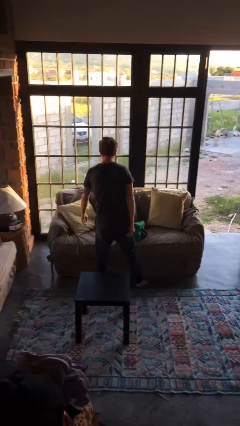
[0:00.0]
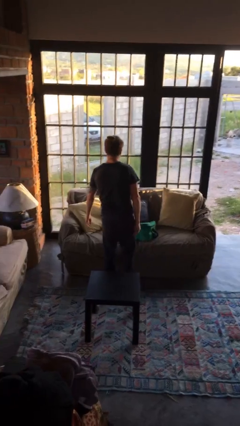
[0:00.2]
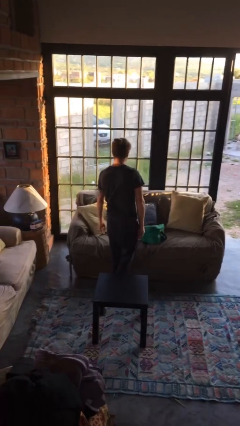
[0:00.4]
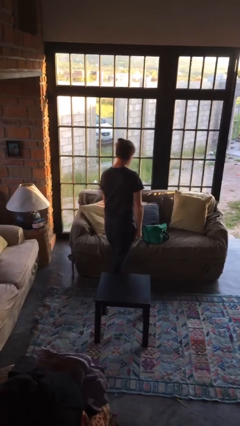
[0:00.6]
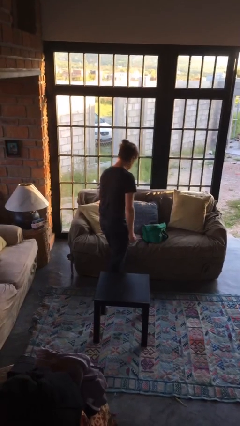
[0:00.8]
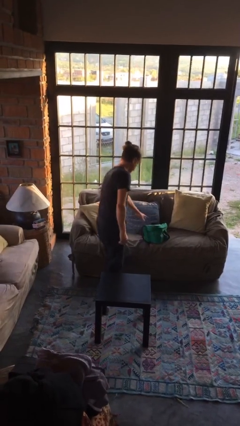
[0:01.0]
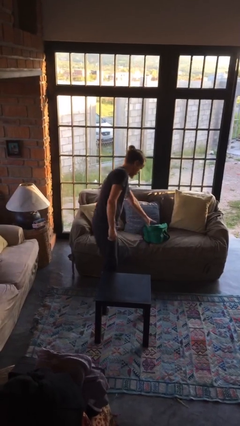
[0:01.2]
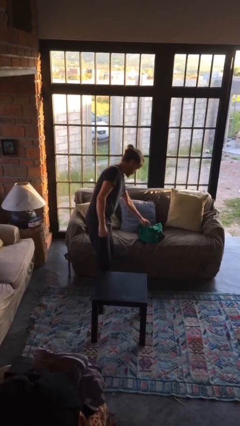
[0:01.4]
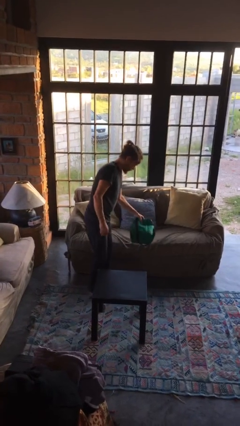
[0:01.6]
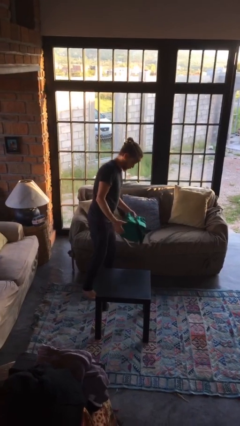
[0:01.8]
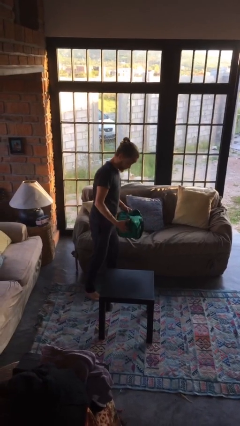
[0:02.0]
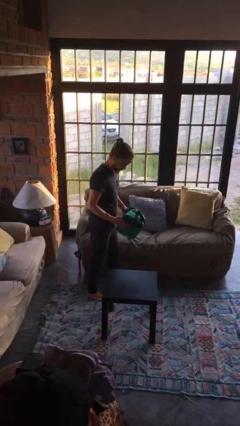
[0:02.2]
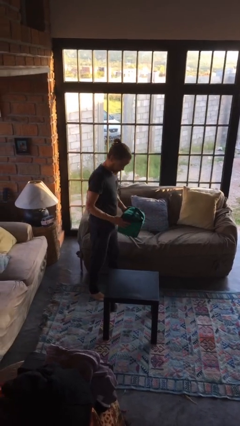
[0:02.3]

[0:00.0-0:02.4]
person picks up object from couch

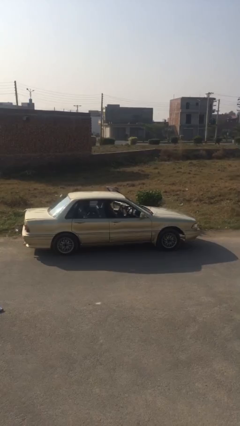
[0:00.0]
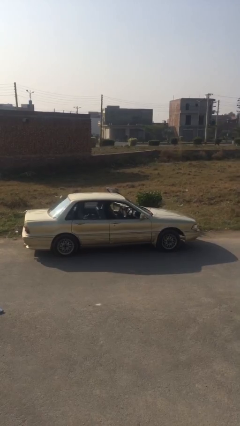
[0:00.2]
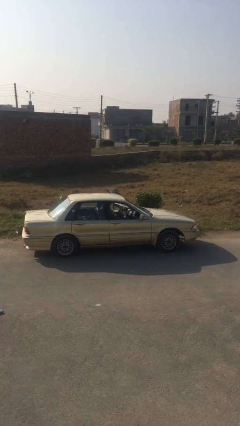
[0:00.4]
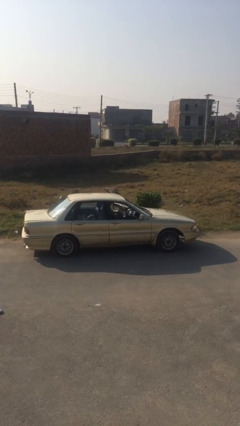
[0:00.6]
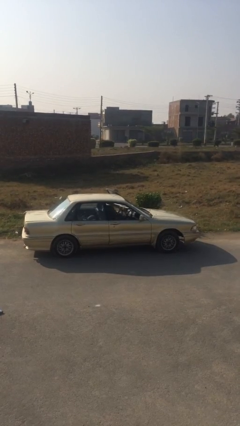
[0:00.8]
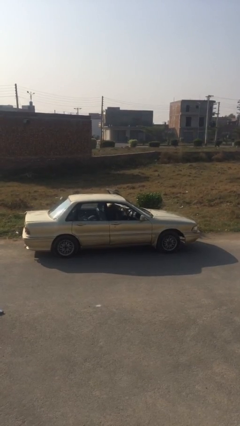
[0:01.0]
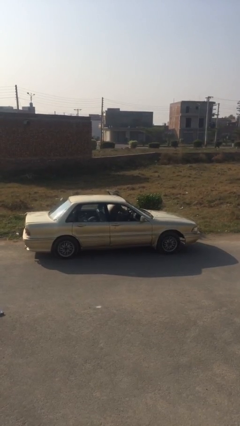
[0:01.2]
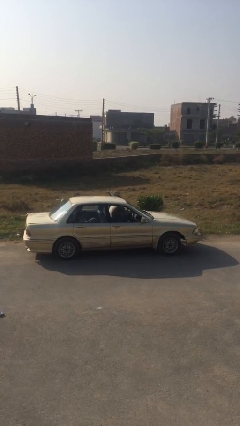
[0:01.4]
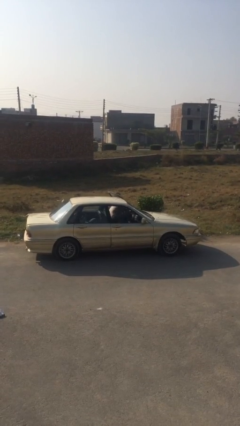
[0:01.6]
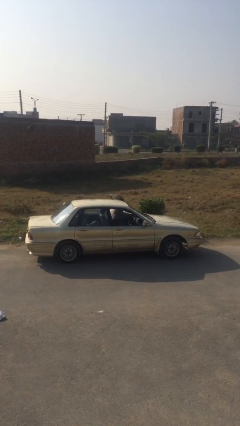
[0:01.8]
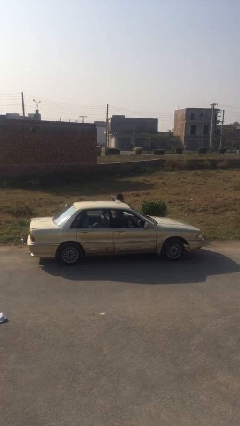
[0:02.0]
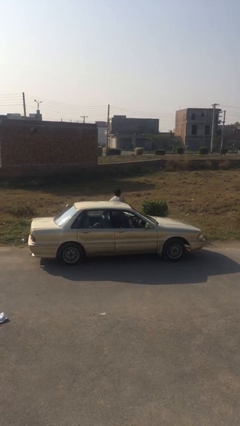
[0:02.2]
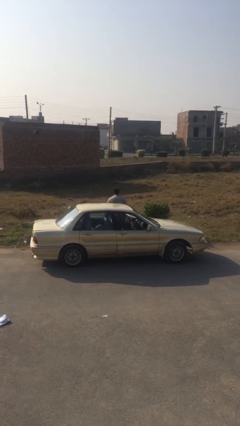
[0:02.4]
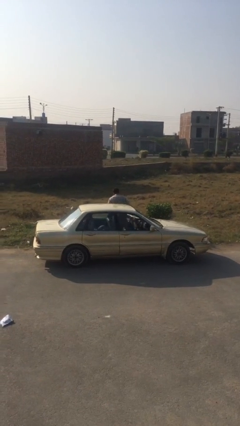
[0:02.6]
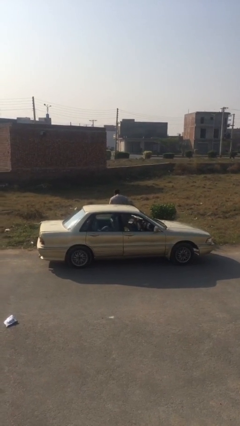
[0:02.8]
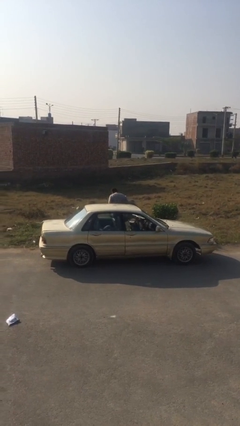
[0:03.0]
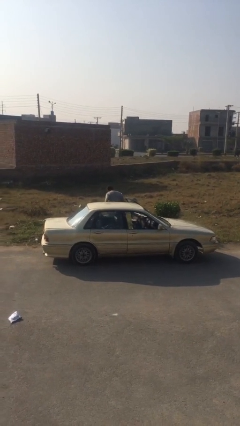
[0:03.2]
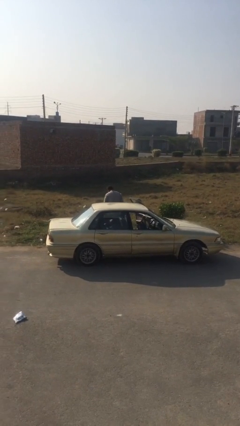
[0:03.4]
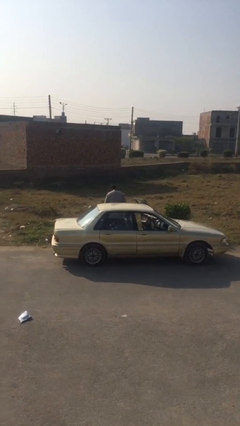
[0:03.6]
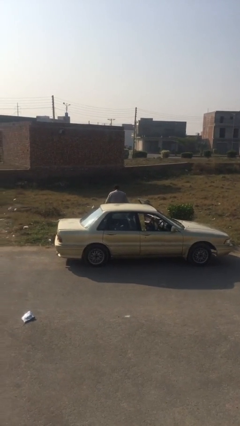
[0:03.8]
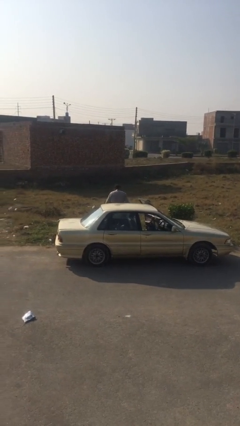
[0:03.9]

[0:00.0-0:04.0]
person exits car

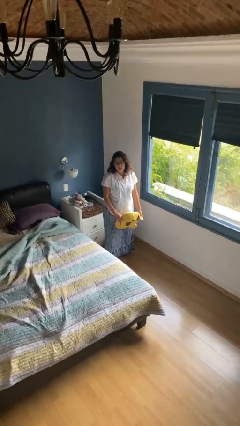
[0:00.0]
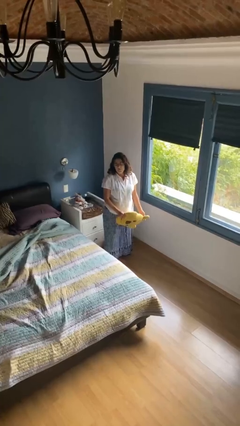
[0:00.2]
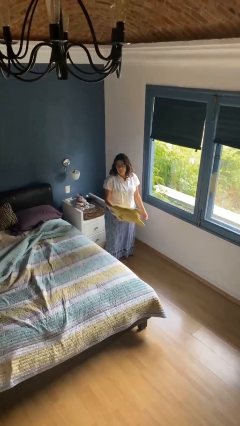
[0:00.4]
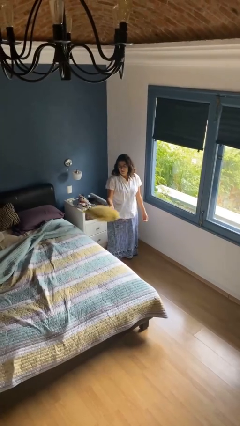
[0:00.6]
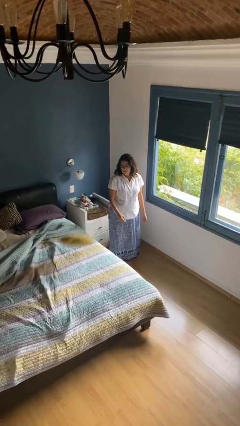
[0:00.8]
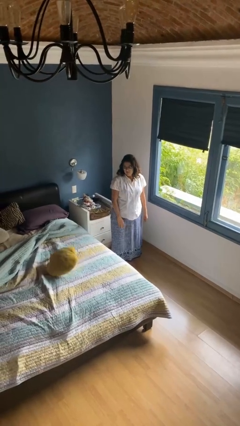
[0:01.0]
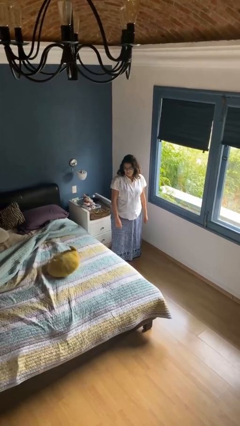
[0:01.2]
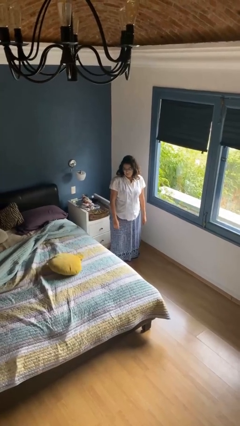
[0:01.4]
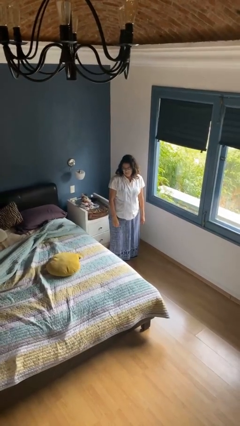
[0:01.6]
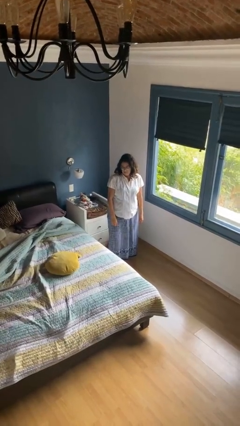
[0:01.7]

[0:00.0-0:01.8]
person throws object on bed

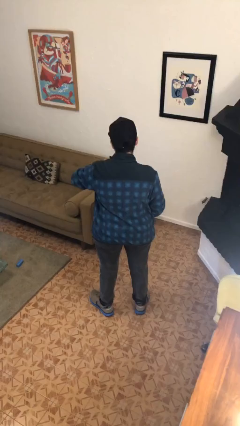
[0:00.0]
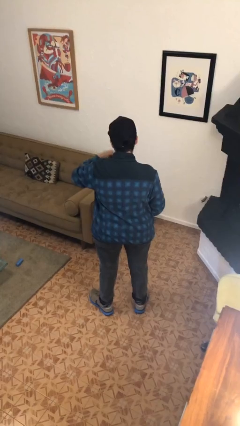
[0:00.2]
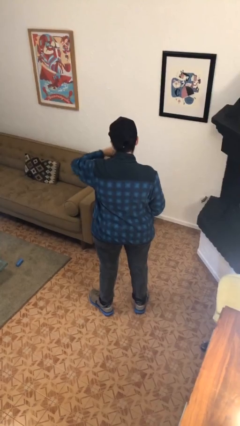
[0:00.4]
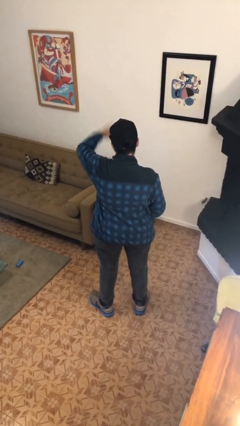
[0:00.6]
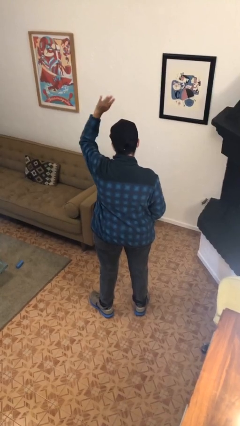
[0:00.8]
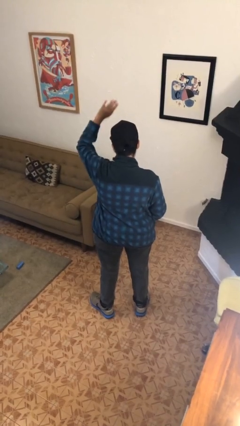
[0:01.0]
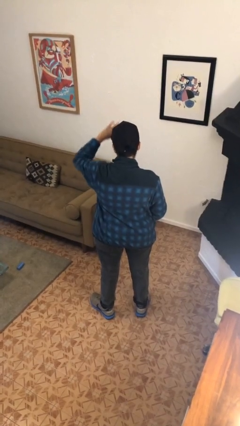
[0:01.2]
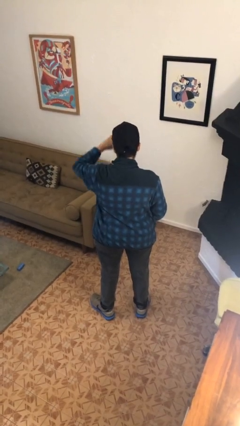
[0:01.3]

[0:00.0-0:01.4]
person gestures swipe up

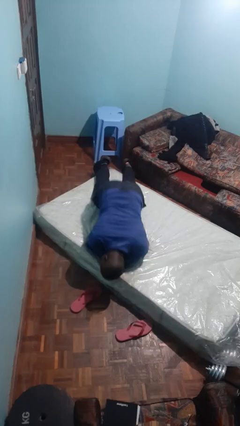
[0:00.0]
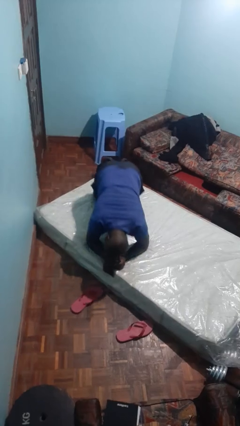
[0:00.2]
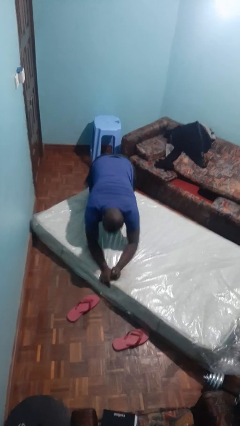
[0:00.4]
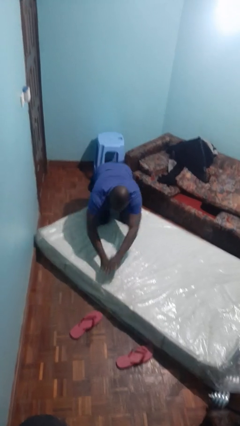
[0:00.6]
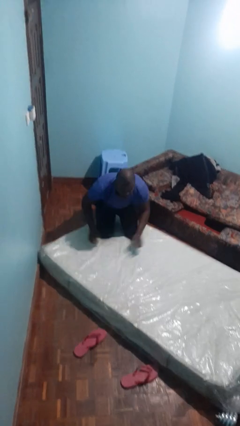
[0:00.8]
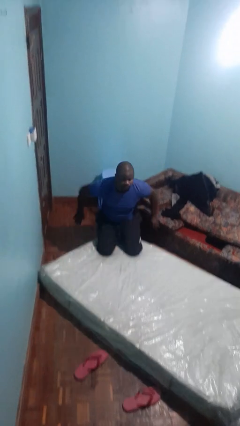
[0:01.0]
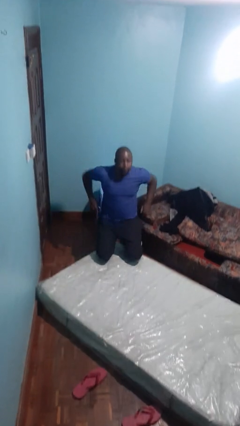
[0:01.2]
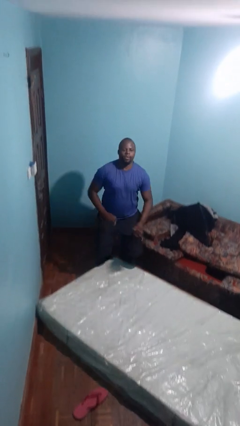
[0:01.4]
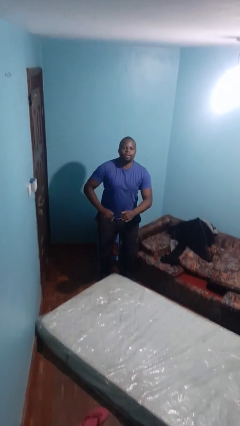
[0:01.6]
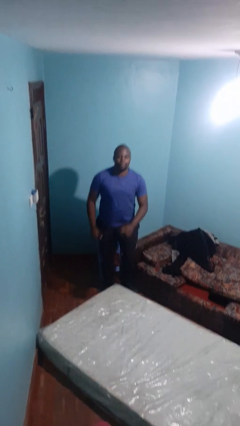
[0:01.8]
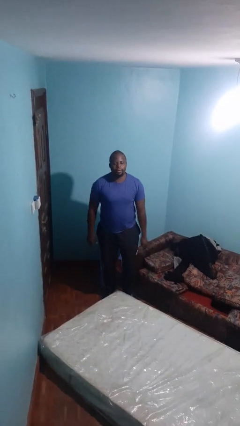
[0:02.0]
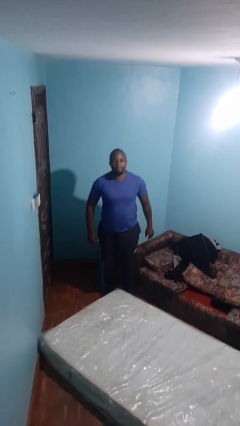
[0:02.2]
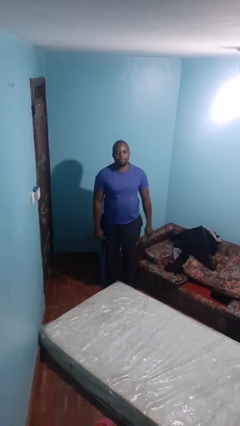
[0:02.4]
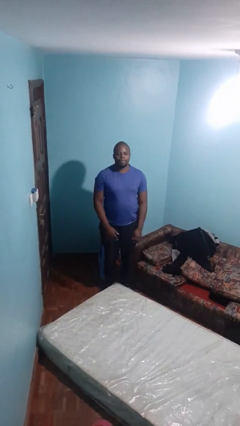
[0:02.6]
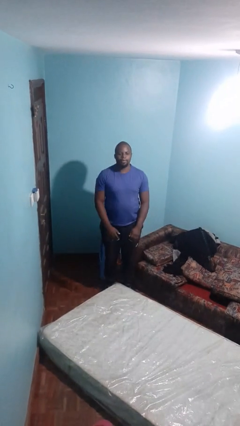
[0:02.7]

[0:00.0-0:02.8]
person stands up

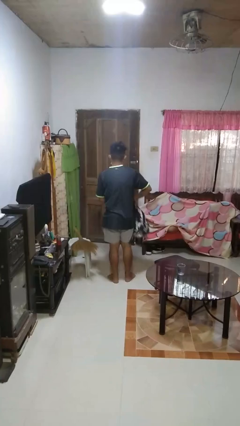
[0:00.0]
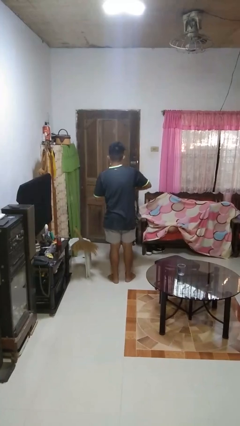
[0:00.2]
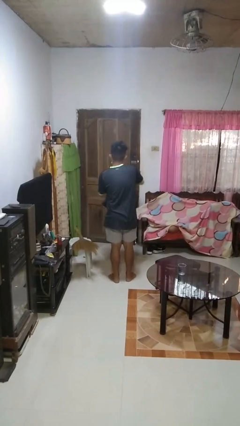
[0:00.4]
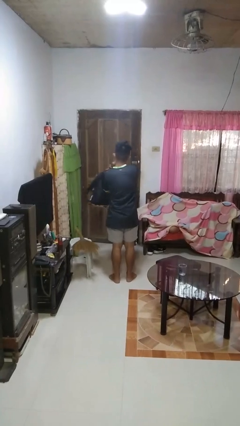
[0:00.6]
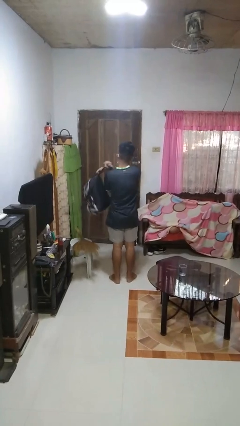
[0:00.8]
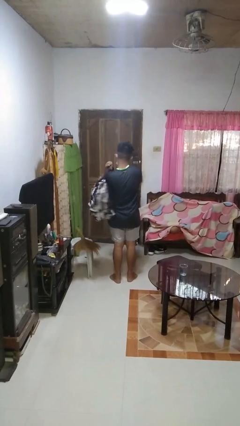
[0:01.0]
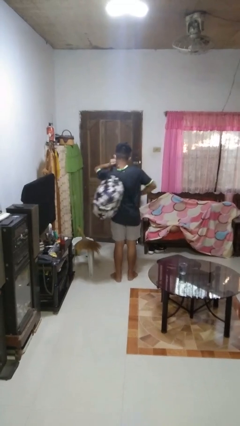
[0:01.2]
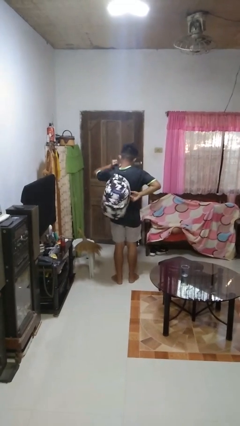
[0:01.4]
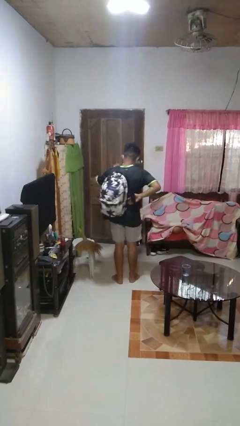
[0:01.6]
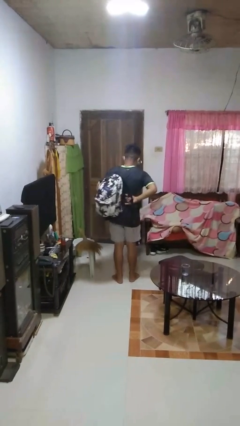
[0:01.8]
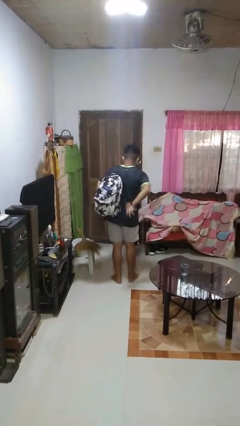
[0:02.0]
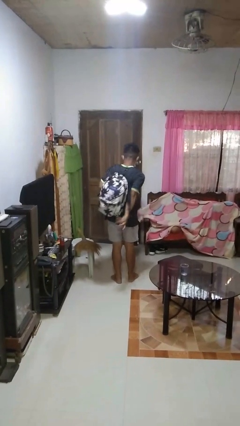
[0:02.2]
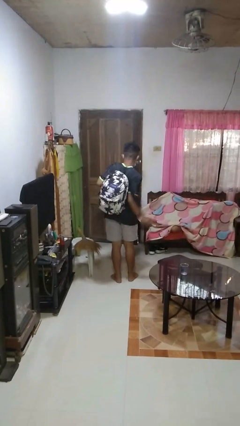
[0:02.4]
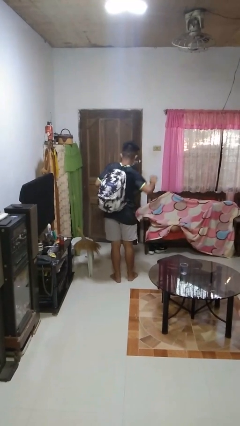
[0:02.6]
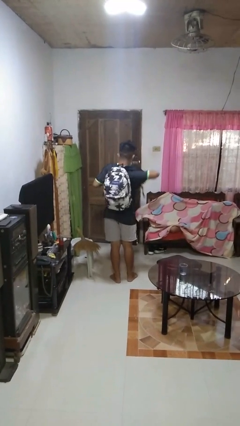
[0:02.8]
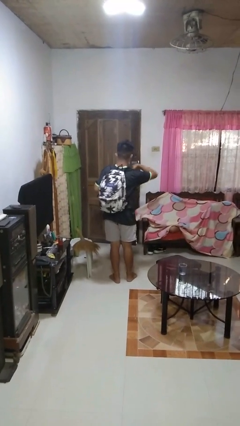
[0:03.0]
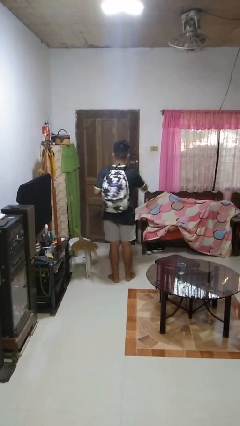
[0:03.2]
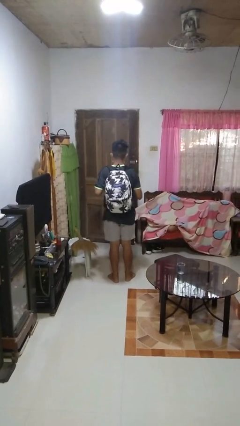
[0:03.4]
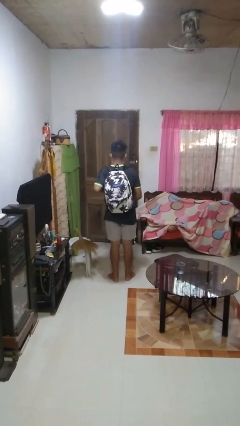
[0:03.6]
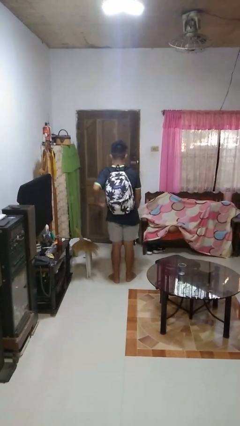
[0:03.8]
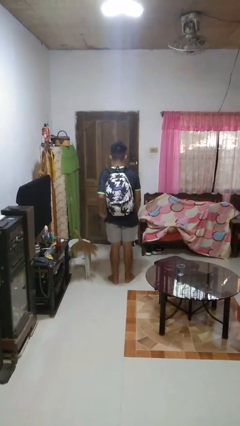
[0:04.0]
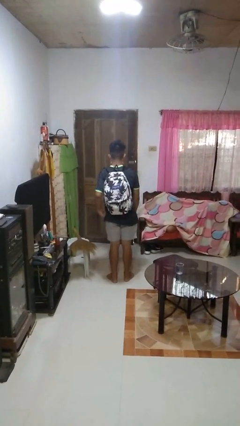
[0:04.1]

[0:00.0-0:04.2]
person puts on backpack

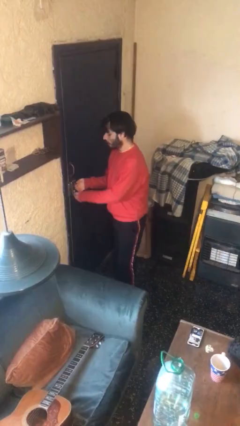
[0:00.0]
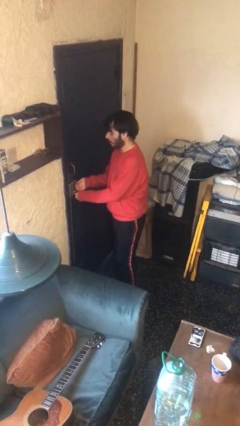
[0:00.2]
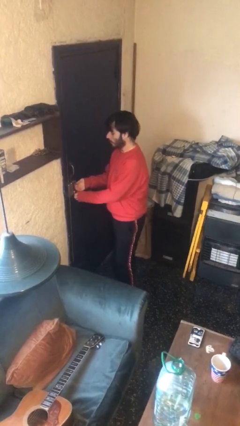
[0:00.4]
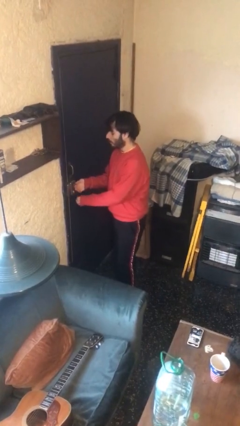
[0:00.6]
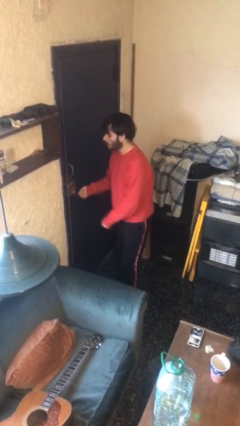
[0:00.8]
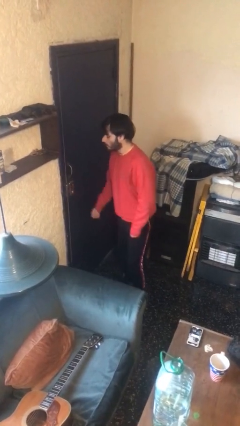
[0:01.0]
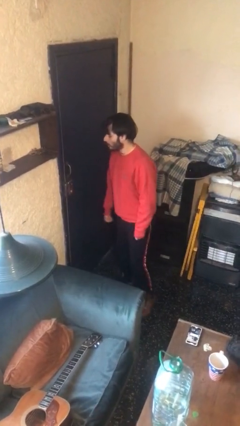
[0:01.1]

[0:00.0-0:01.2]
person locks door with keys
